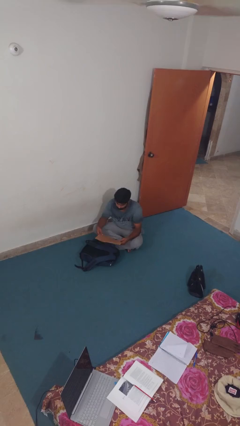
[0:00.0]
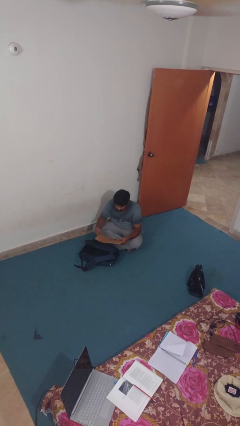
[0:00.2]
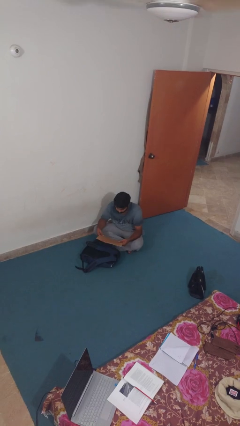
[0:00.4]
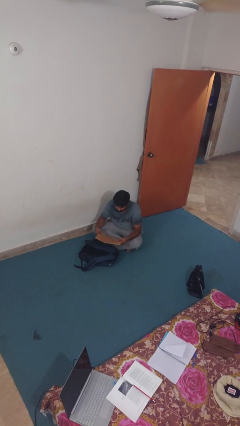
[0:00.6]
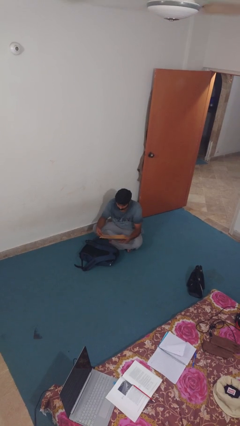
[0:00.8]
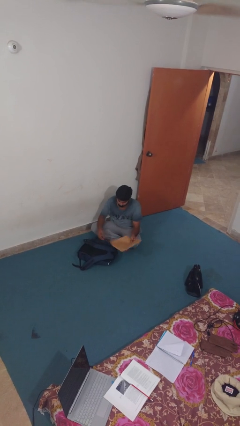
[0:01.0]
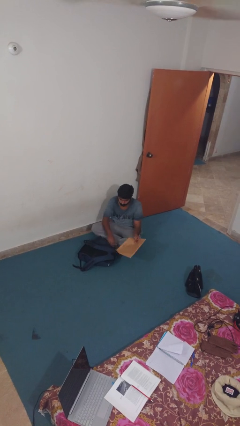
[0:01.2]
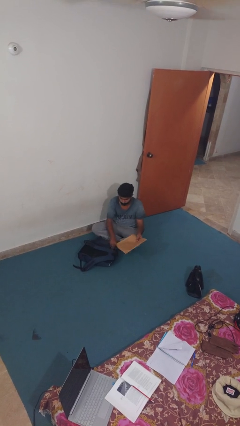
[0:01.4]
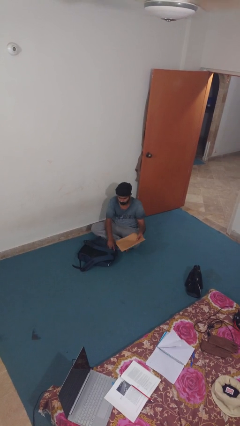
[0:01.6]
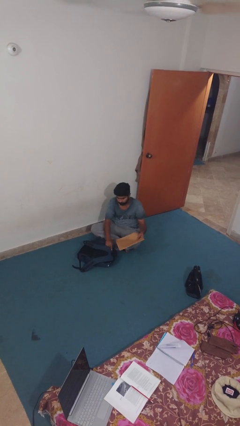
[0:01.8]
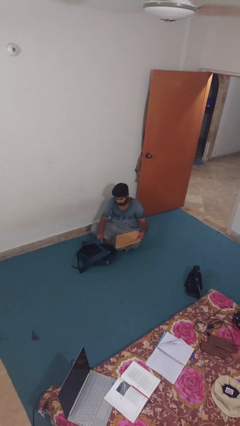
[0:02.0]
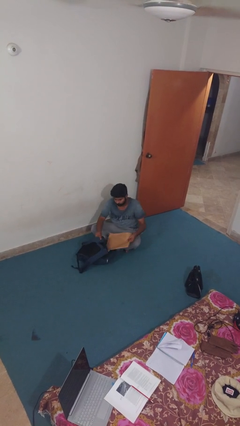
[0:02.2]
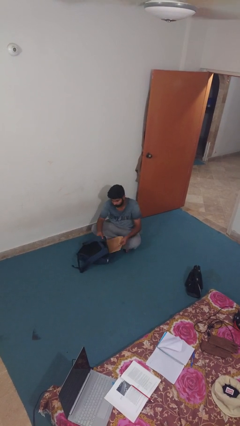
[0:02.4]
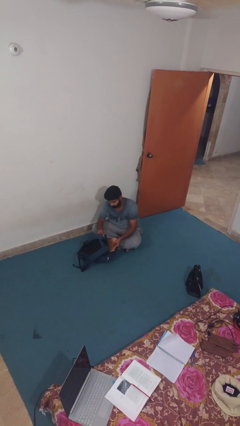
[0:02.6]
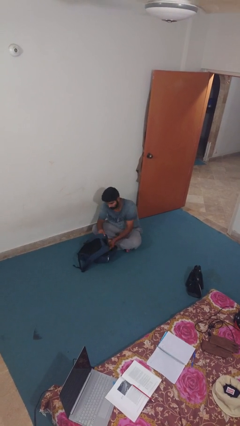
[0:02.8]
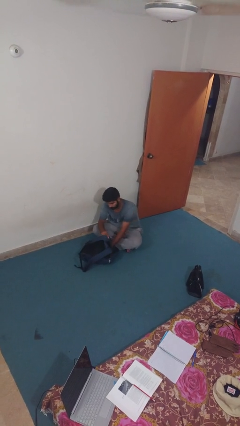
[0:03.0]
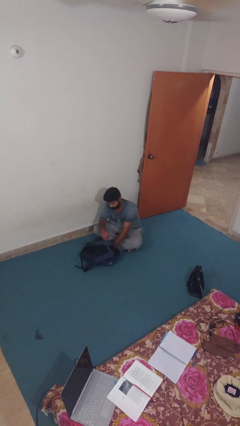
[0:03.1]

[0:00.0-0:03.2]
person puts object into backpack

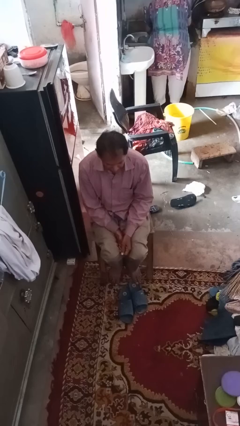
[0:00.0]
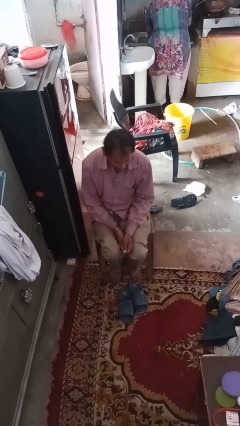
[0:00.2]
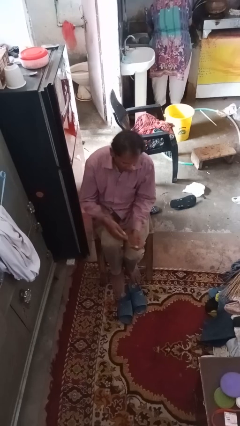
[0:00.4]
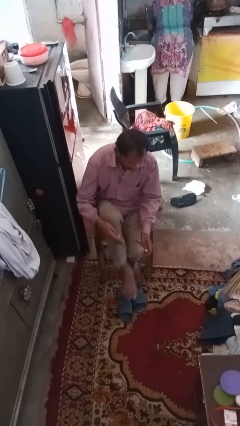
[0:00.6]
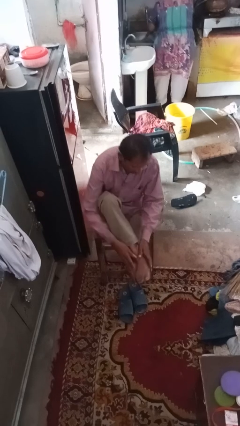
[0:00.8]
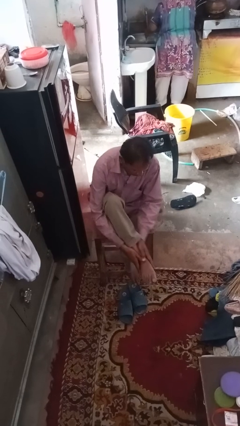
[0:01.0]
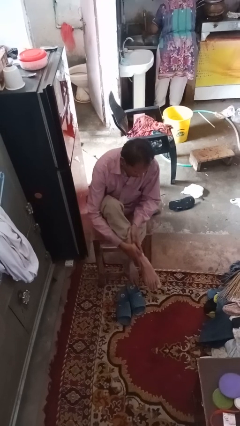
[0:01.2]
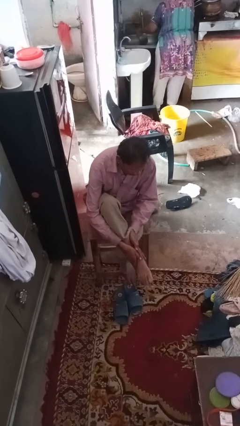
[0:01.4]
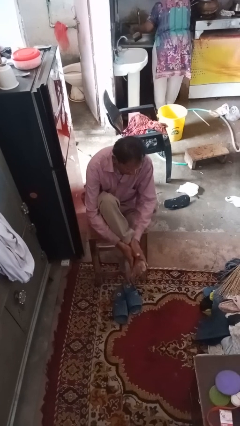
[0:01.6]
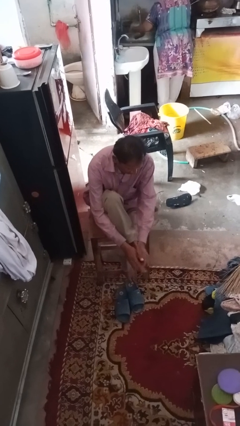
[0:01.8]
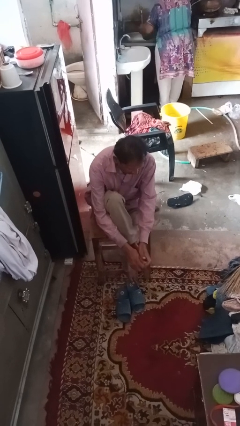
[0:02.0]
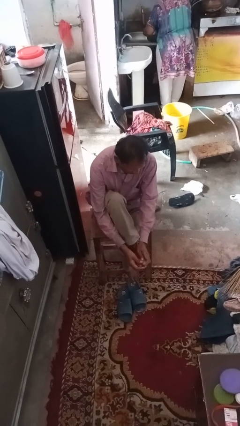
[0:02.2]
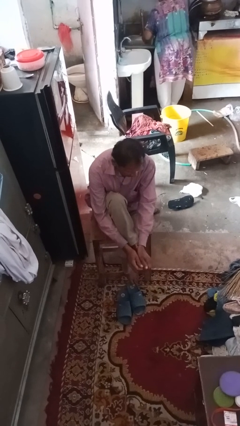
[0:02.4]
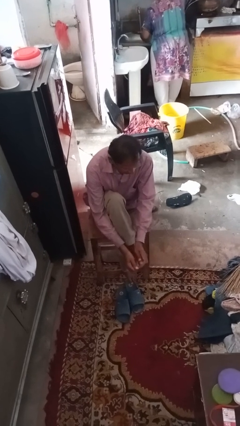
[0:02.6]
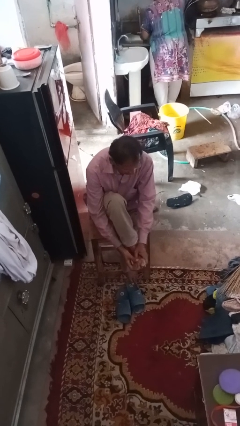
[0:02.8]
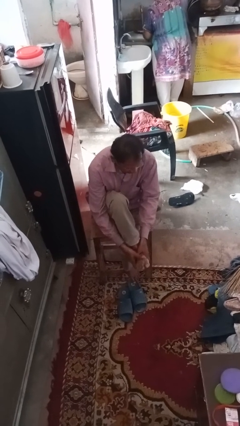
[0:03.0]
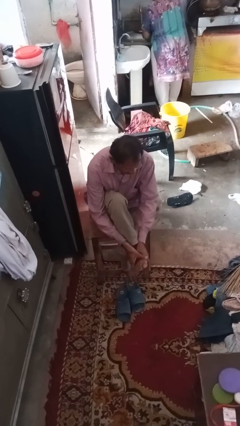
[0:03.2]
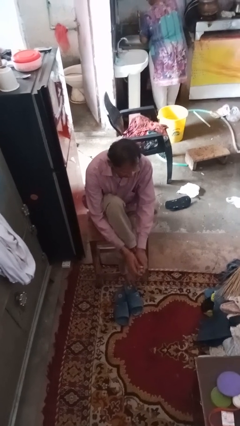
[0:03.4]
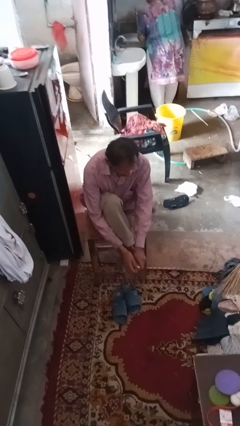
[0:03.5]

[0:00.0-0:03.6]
person rubs foot

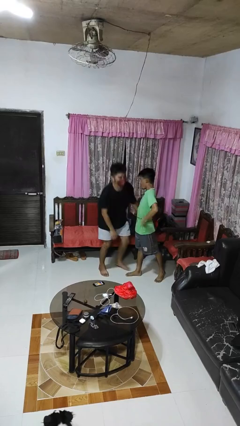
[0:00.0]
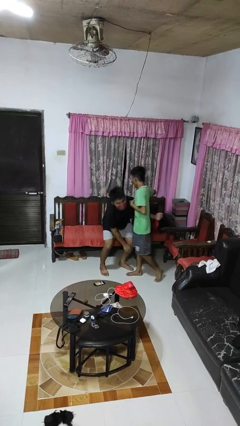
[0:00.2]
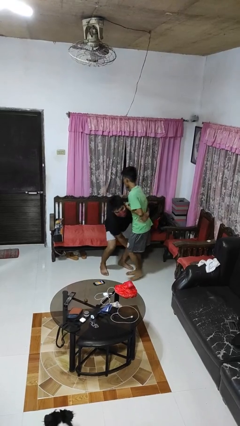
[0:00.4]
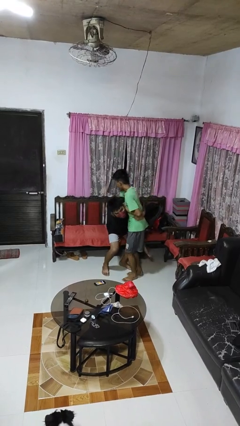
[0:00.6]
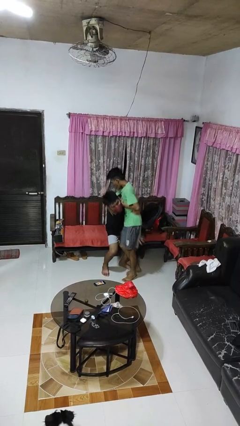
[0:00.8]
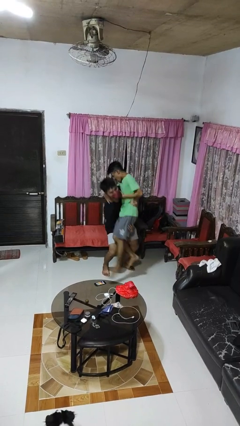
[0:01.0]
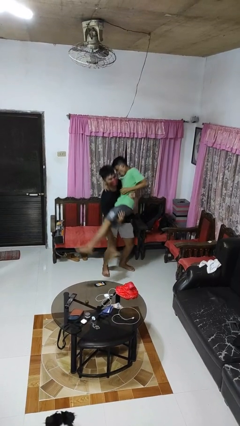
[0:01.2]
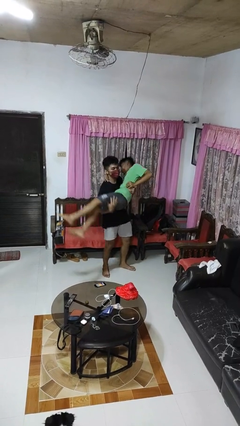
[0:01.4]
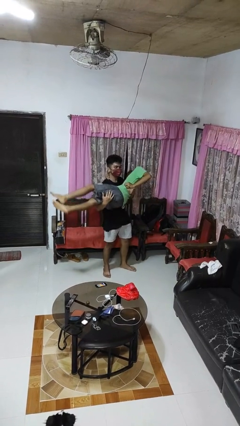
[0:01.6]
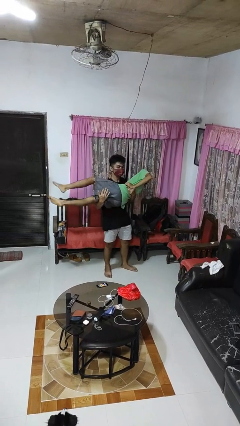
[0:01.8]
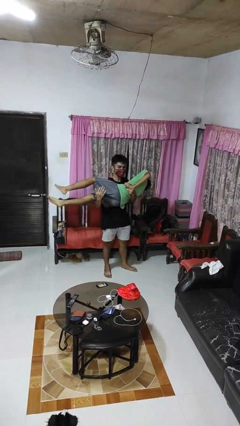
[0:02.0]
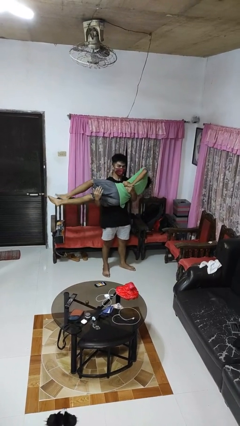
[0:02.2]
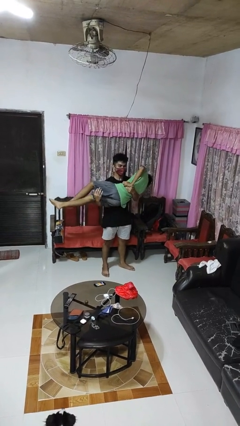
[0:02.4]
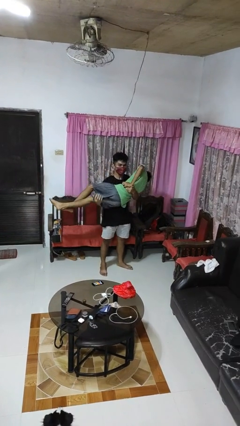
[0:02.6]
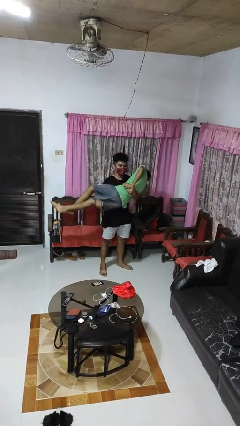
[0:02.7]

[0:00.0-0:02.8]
person picks up person

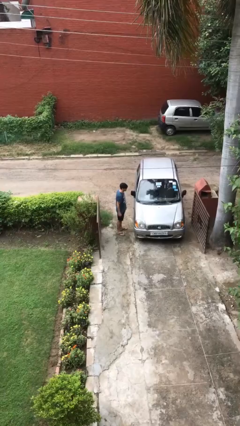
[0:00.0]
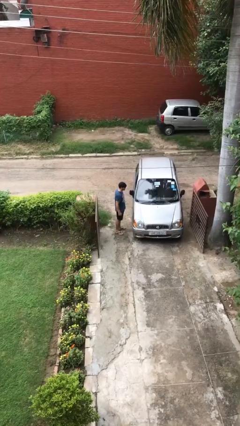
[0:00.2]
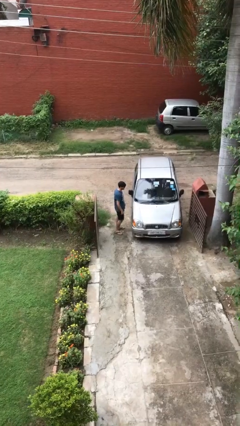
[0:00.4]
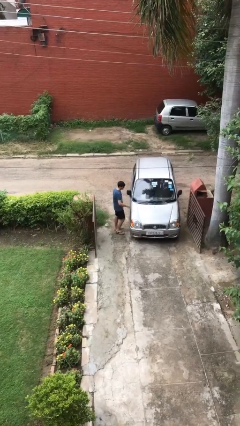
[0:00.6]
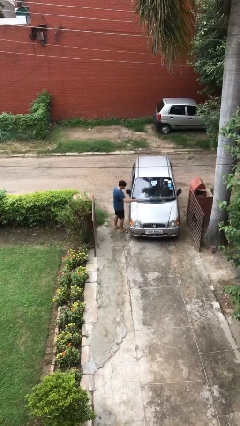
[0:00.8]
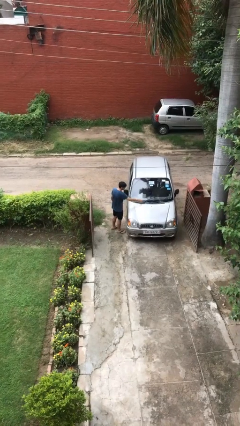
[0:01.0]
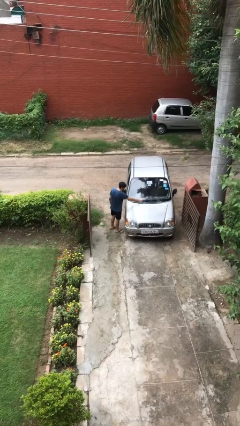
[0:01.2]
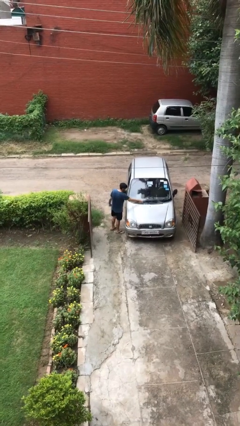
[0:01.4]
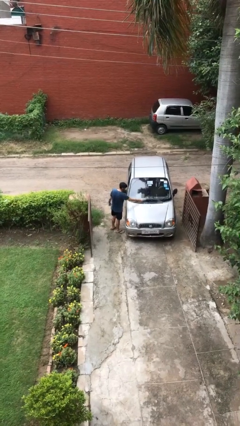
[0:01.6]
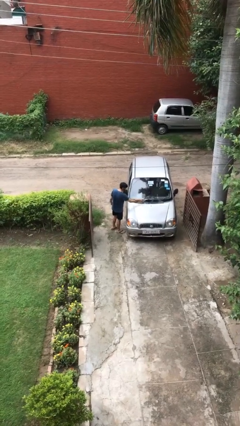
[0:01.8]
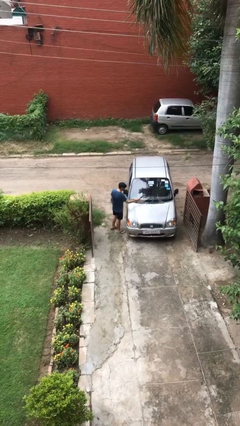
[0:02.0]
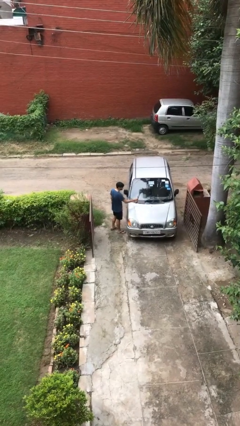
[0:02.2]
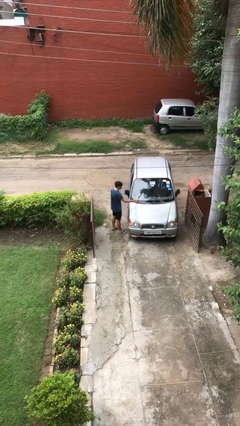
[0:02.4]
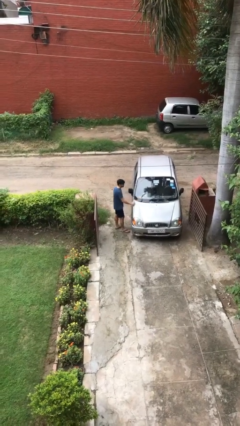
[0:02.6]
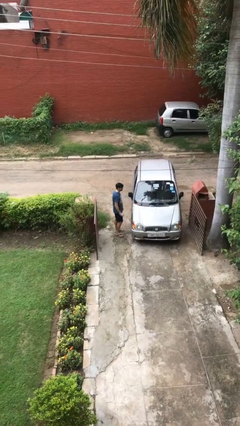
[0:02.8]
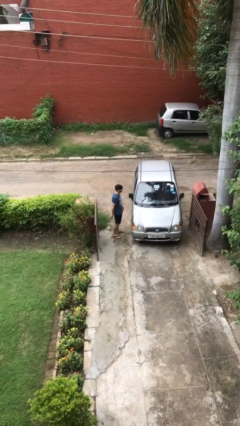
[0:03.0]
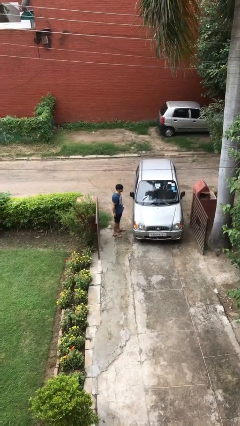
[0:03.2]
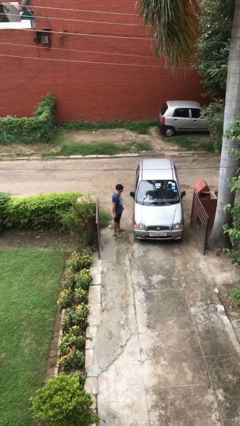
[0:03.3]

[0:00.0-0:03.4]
person flips up car wipers

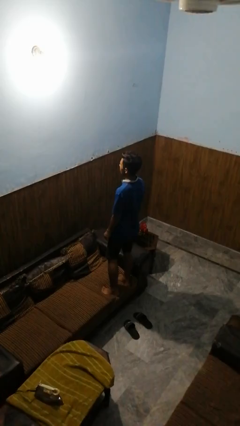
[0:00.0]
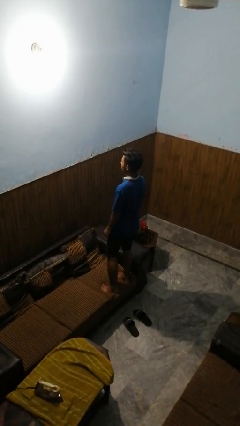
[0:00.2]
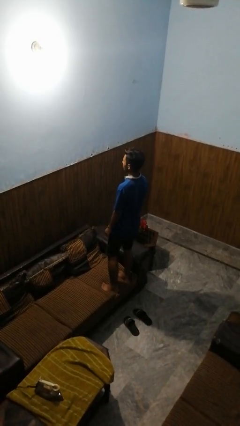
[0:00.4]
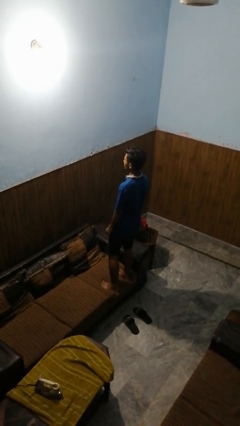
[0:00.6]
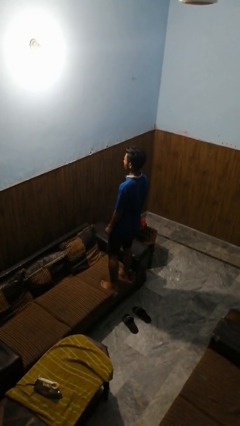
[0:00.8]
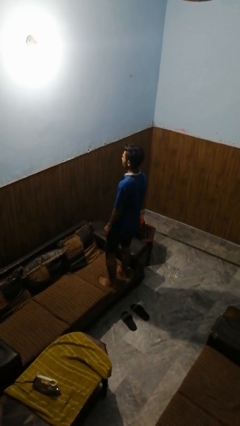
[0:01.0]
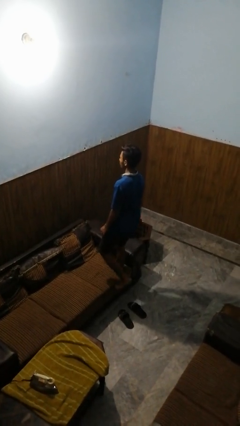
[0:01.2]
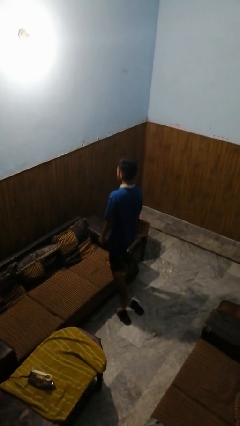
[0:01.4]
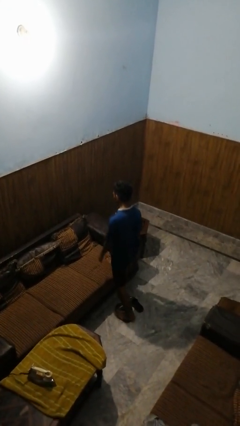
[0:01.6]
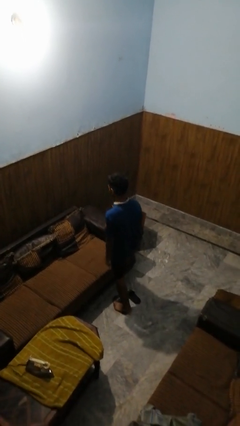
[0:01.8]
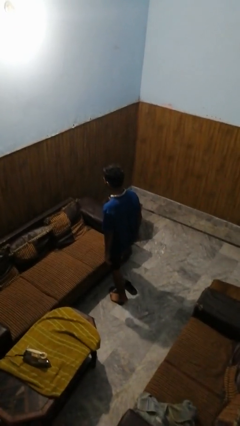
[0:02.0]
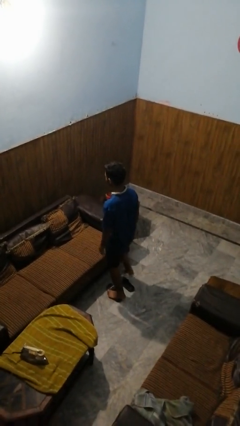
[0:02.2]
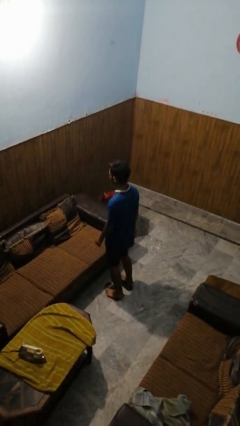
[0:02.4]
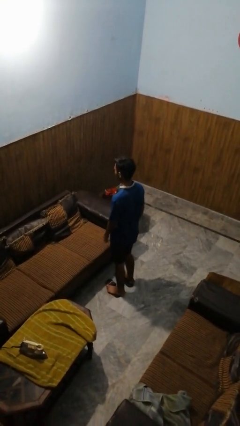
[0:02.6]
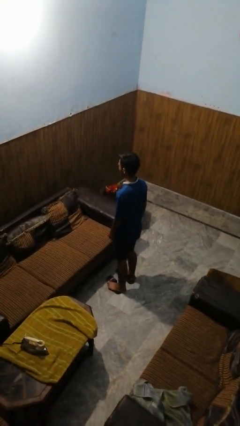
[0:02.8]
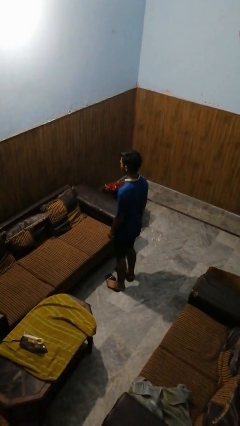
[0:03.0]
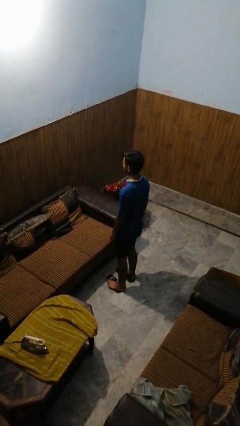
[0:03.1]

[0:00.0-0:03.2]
person climbs off couch

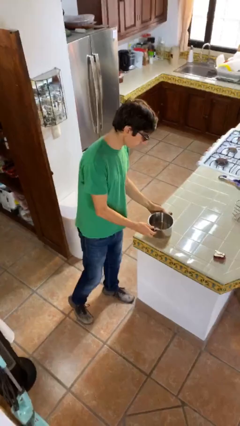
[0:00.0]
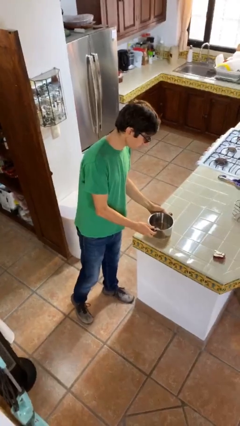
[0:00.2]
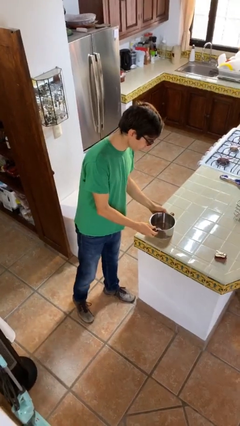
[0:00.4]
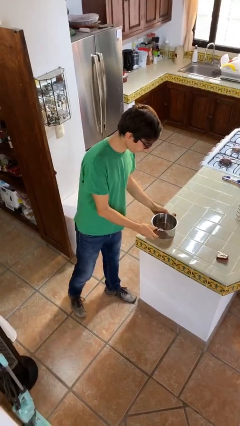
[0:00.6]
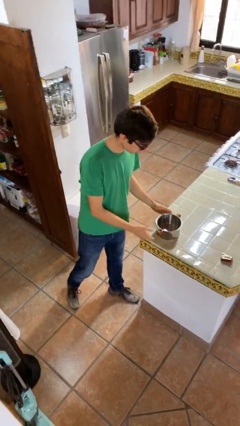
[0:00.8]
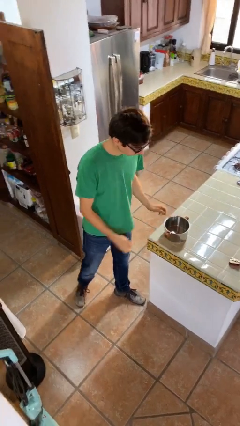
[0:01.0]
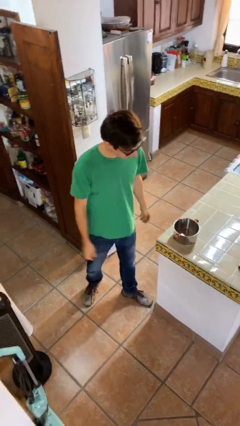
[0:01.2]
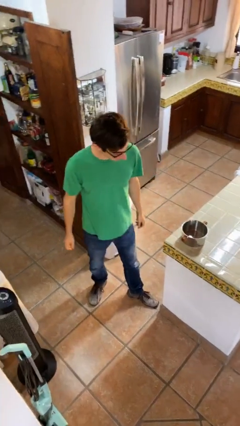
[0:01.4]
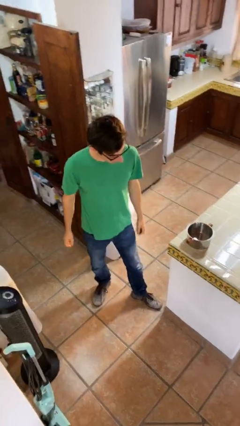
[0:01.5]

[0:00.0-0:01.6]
person puts down object on table
